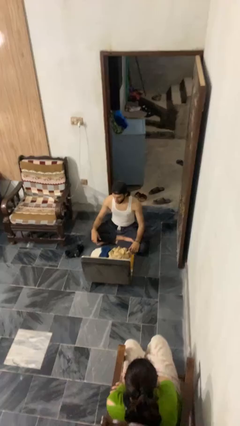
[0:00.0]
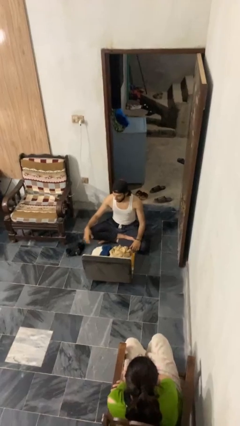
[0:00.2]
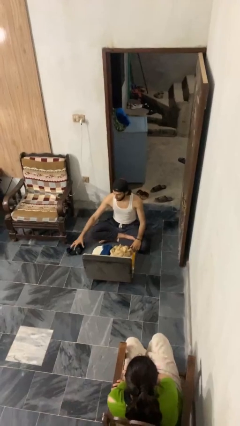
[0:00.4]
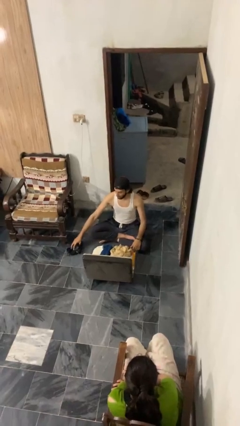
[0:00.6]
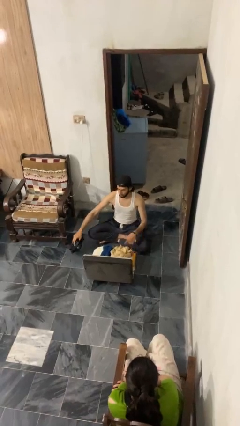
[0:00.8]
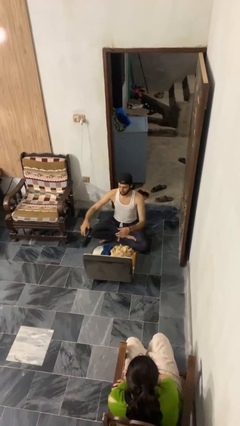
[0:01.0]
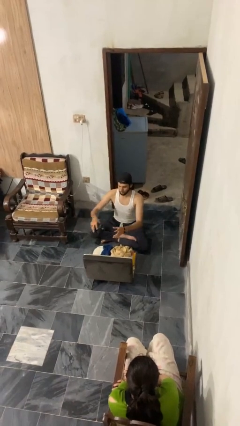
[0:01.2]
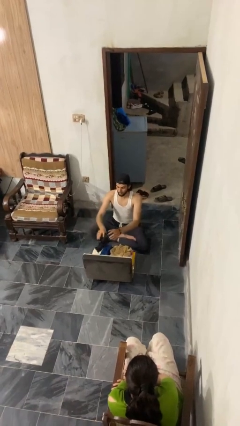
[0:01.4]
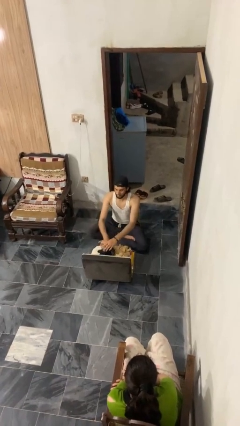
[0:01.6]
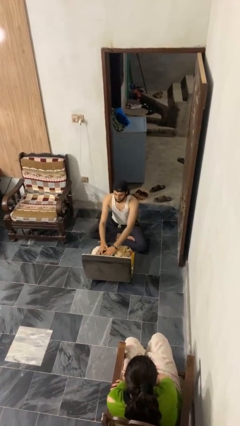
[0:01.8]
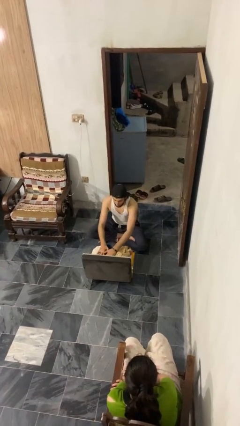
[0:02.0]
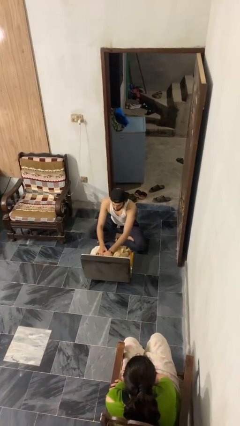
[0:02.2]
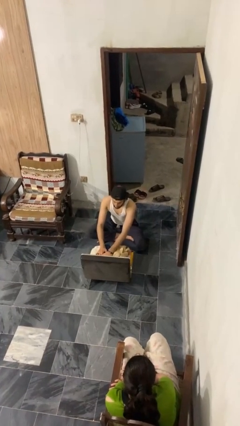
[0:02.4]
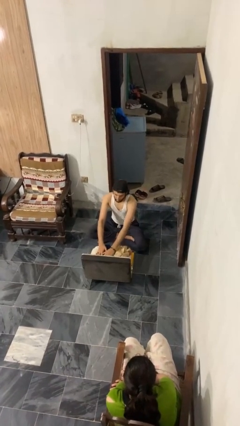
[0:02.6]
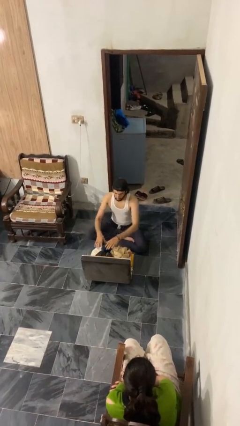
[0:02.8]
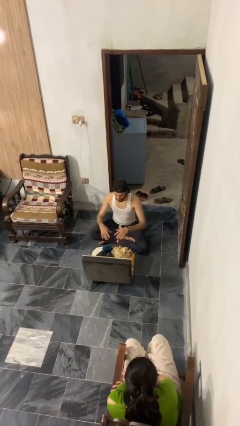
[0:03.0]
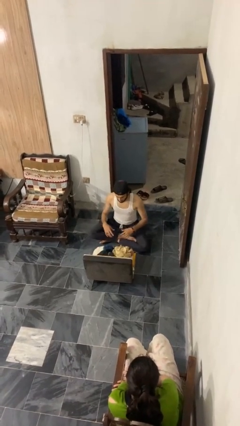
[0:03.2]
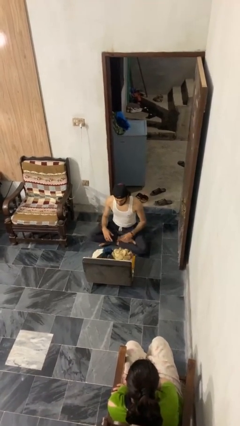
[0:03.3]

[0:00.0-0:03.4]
person loads clothes into suitcase

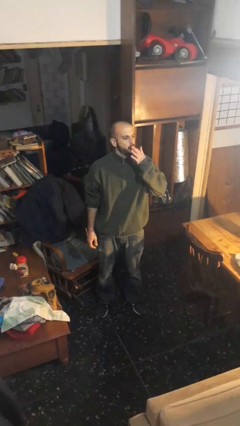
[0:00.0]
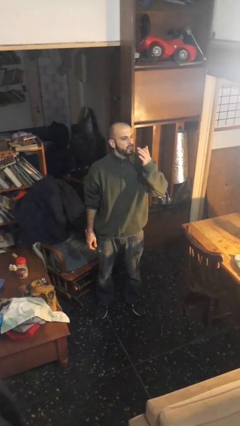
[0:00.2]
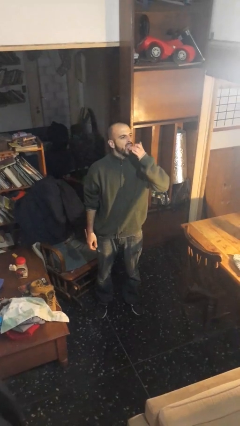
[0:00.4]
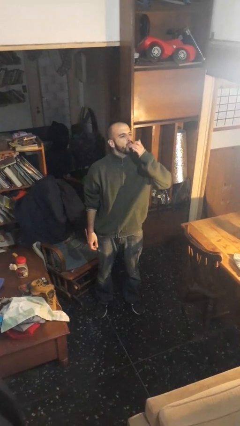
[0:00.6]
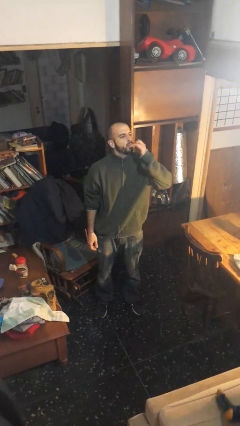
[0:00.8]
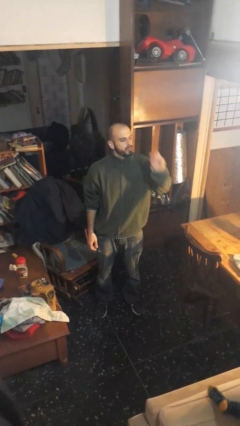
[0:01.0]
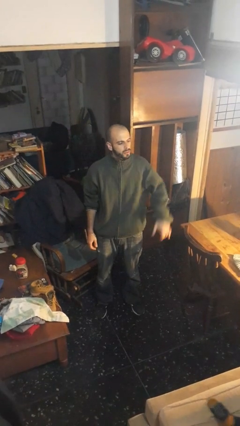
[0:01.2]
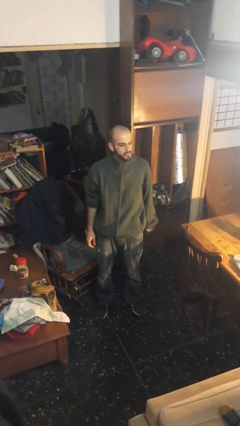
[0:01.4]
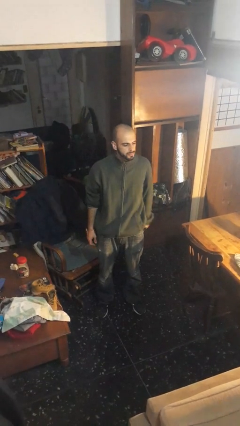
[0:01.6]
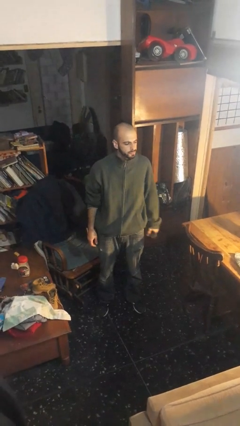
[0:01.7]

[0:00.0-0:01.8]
person licks fingers

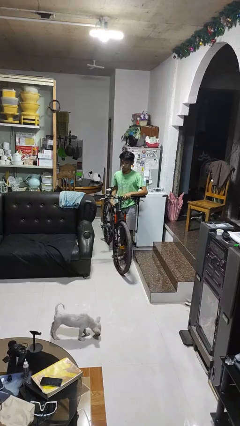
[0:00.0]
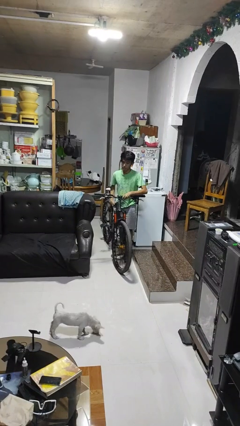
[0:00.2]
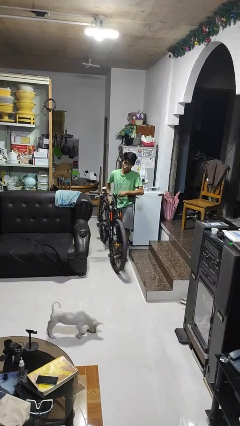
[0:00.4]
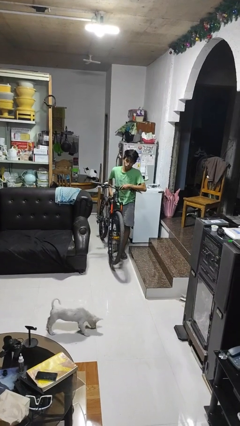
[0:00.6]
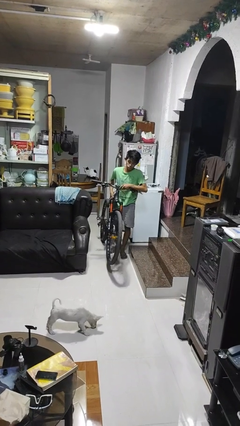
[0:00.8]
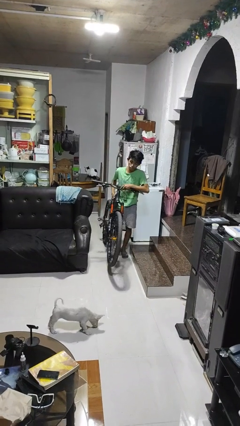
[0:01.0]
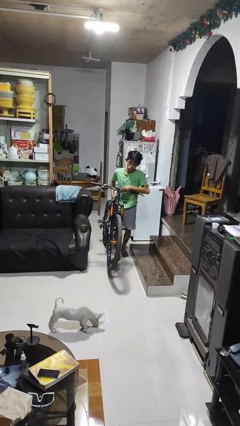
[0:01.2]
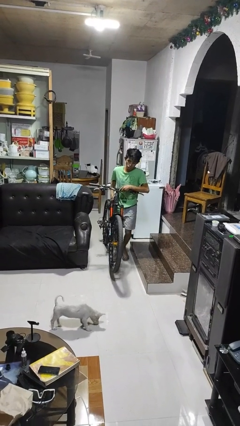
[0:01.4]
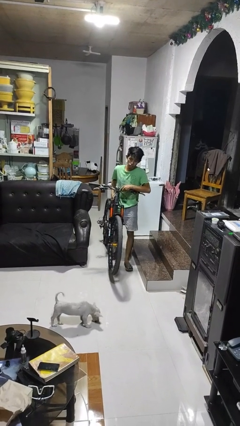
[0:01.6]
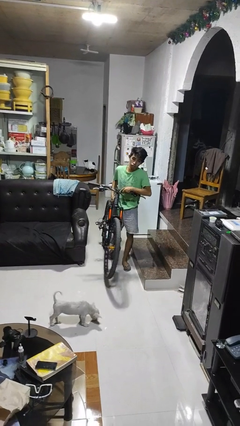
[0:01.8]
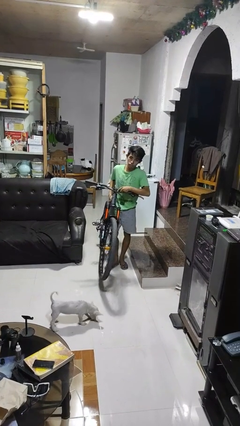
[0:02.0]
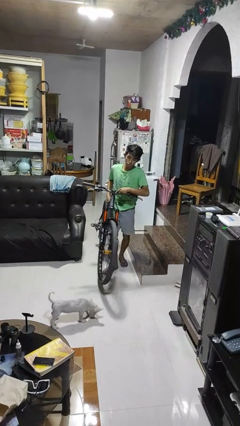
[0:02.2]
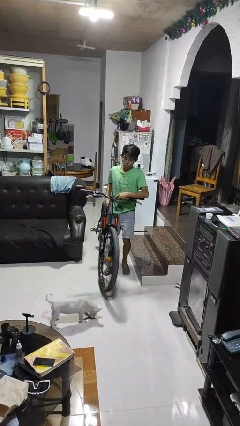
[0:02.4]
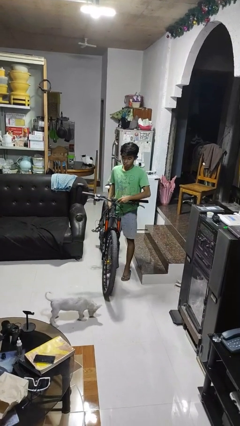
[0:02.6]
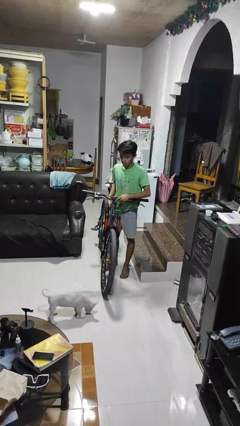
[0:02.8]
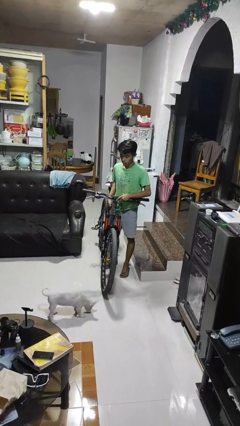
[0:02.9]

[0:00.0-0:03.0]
person carries bicycle

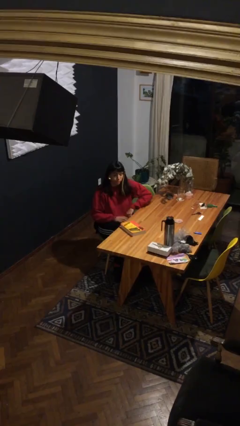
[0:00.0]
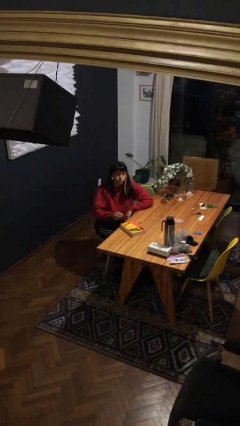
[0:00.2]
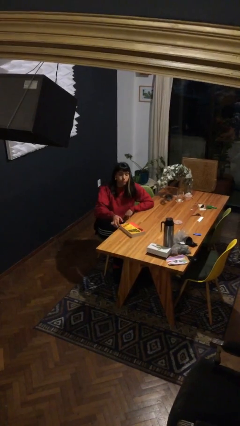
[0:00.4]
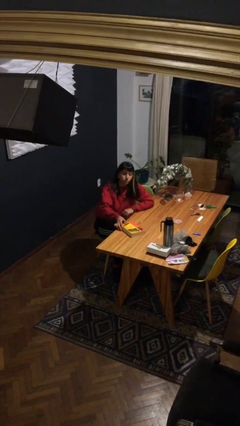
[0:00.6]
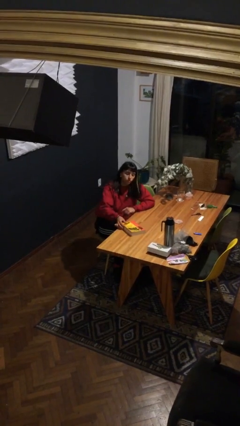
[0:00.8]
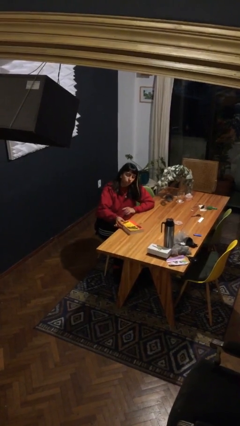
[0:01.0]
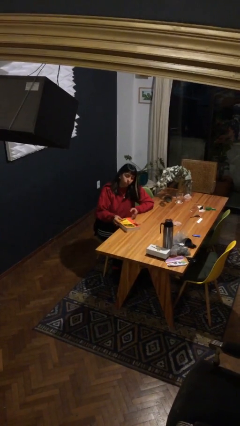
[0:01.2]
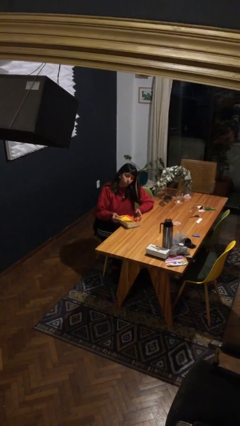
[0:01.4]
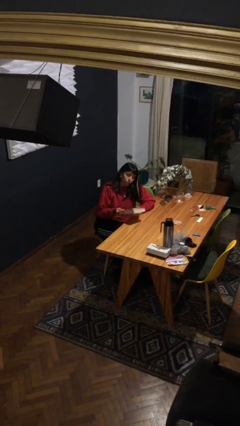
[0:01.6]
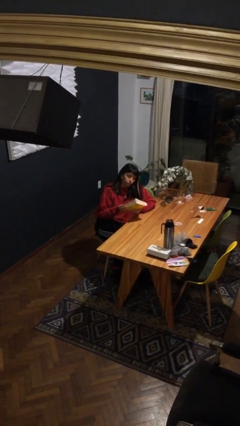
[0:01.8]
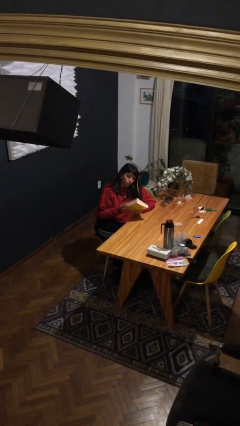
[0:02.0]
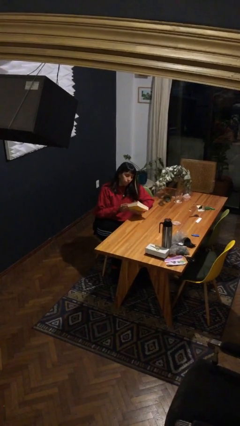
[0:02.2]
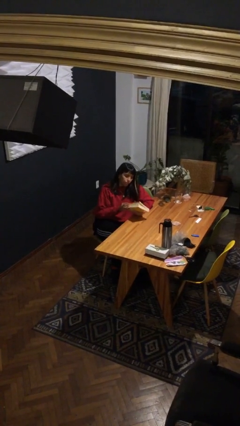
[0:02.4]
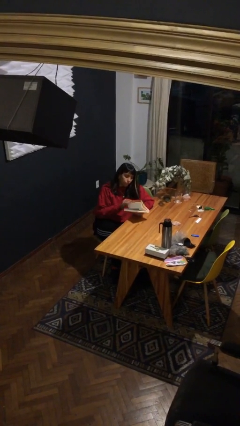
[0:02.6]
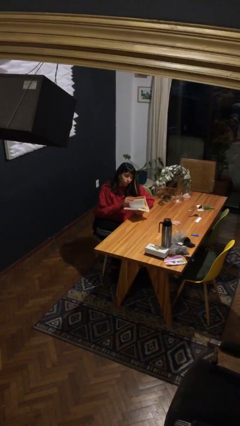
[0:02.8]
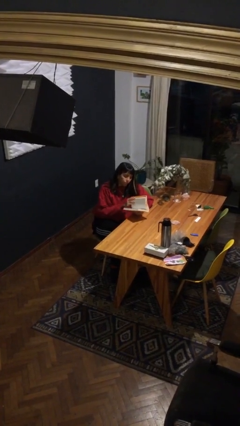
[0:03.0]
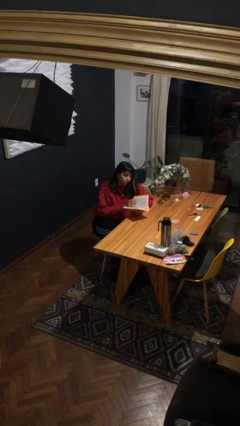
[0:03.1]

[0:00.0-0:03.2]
person picks up object from table

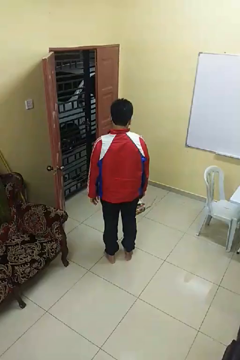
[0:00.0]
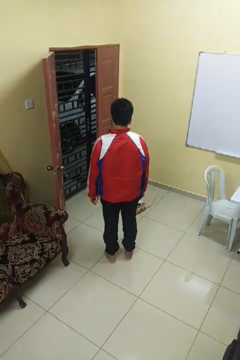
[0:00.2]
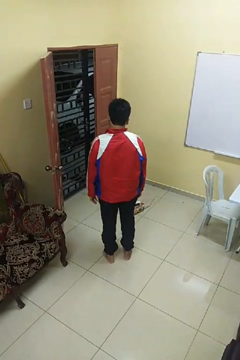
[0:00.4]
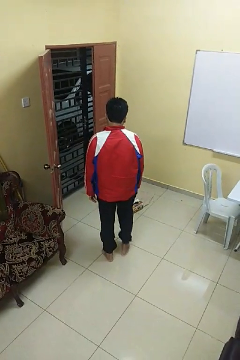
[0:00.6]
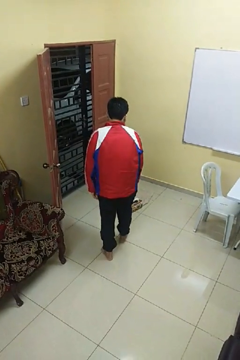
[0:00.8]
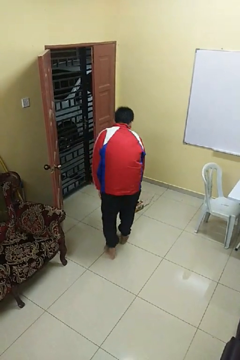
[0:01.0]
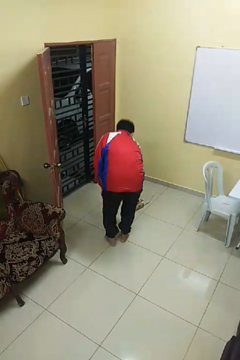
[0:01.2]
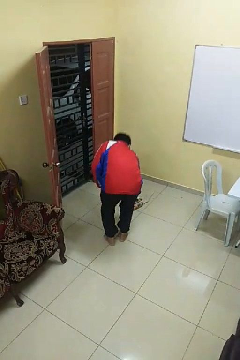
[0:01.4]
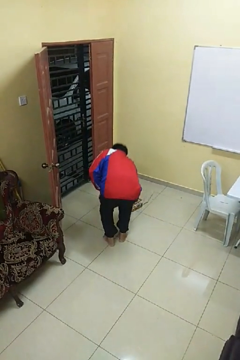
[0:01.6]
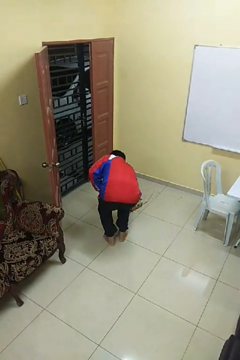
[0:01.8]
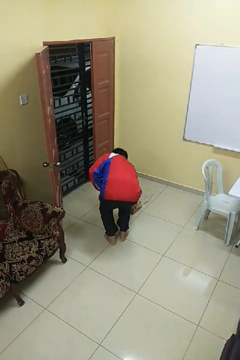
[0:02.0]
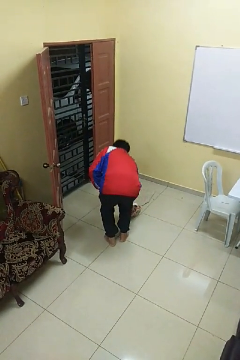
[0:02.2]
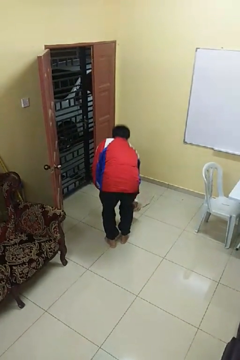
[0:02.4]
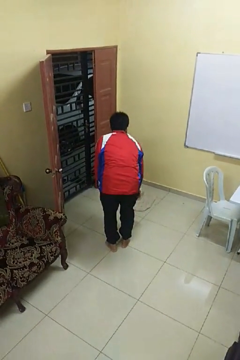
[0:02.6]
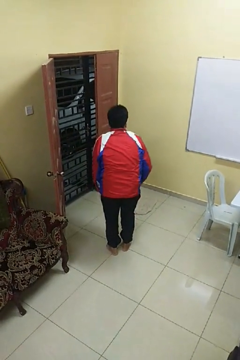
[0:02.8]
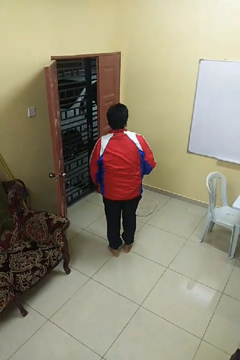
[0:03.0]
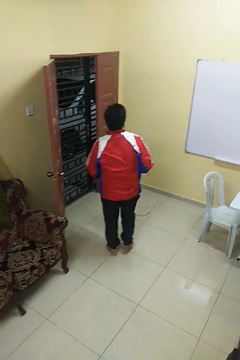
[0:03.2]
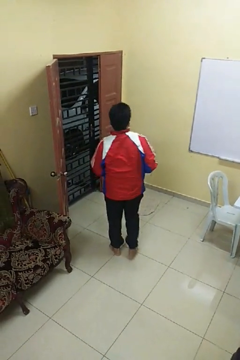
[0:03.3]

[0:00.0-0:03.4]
person picks up object from floor

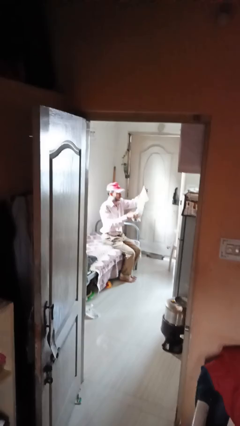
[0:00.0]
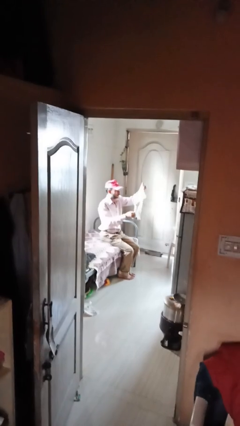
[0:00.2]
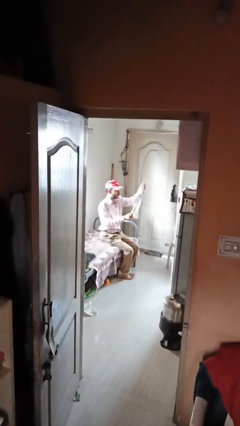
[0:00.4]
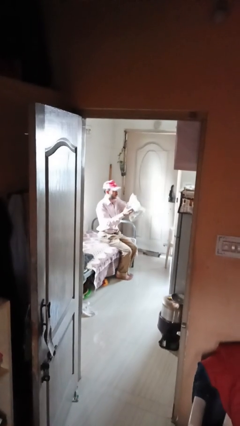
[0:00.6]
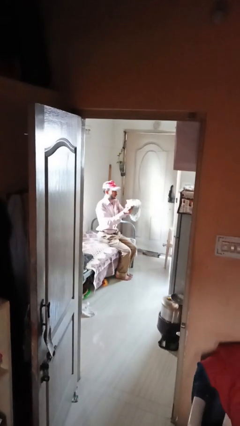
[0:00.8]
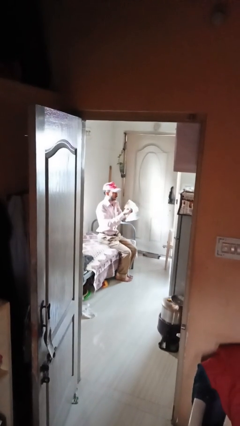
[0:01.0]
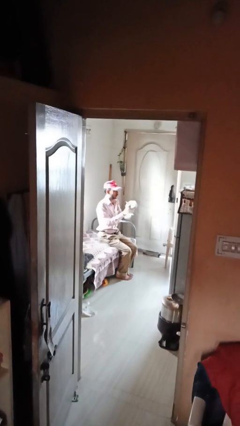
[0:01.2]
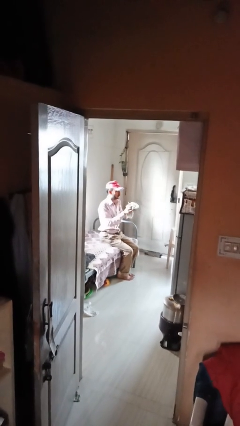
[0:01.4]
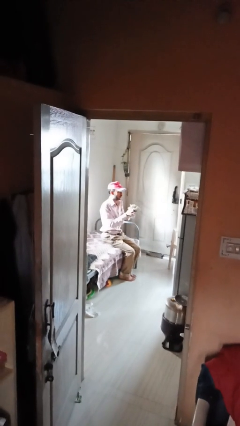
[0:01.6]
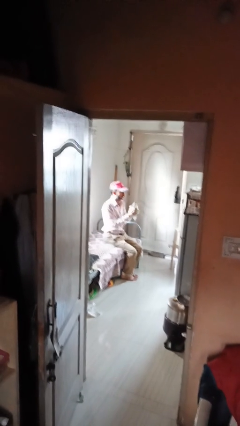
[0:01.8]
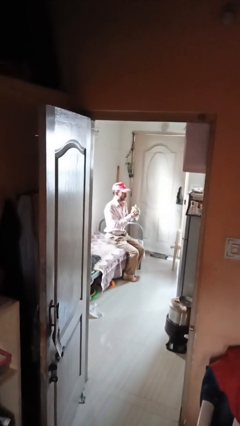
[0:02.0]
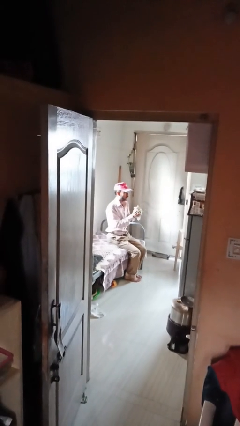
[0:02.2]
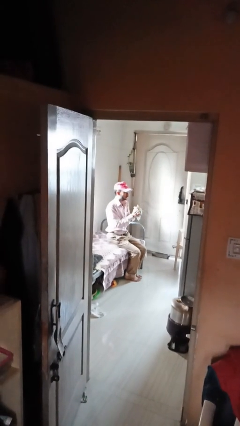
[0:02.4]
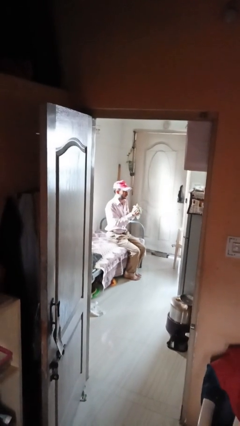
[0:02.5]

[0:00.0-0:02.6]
person crumples paper
